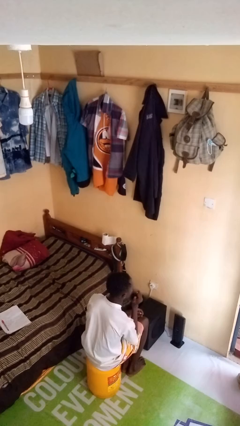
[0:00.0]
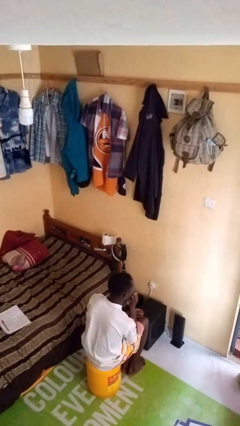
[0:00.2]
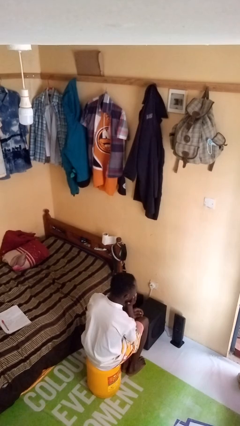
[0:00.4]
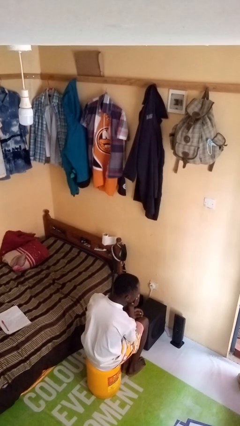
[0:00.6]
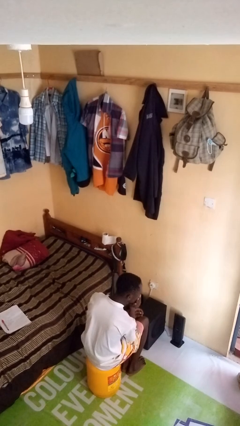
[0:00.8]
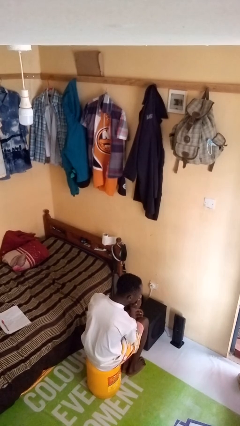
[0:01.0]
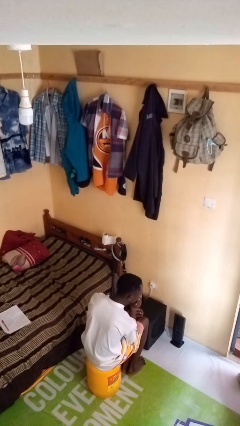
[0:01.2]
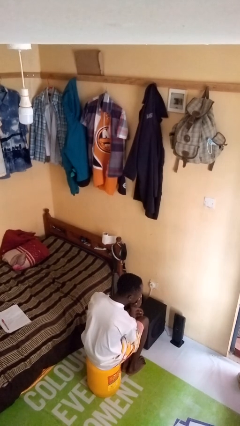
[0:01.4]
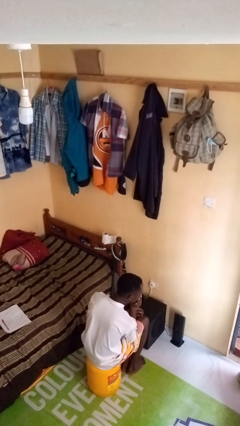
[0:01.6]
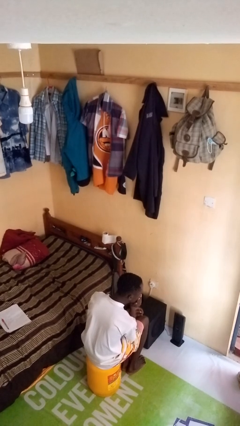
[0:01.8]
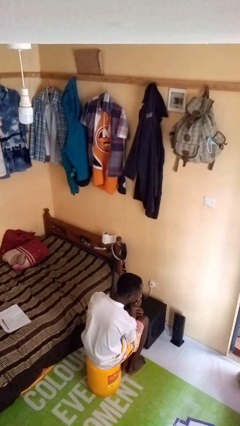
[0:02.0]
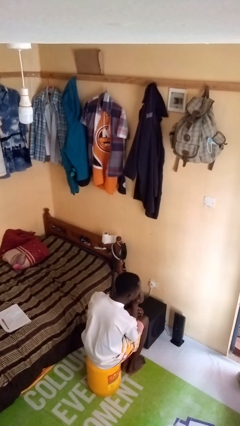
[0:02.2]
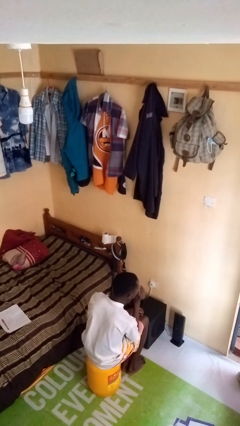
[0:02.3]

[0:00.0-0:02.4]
person strokes chin

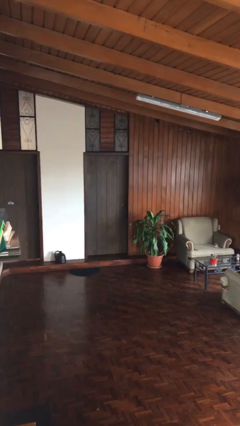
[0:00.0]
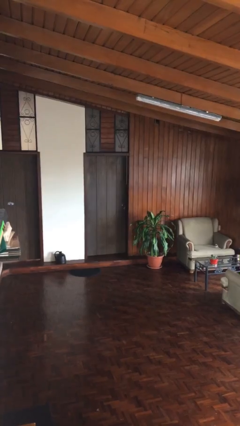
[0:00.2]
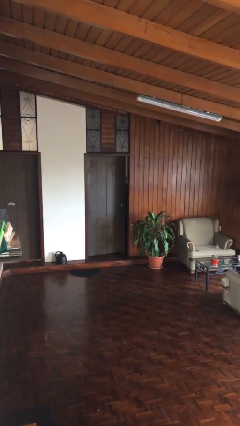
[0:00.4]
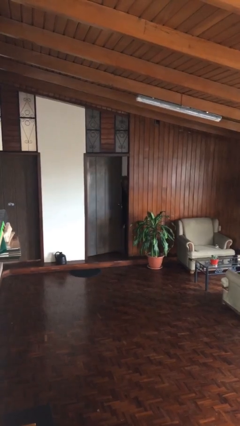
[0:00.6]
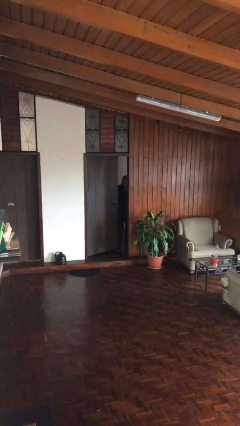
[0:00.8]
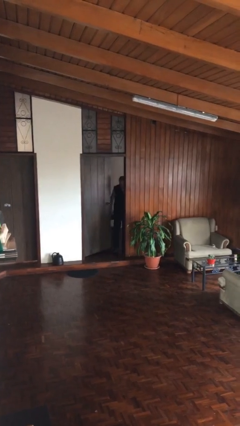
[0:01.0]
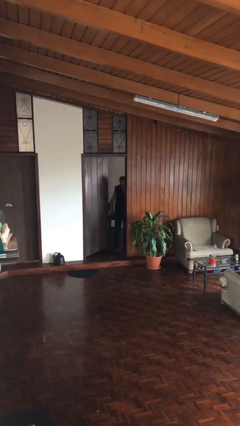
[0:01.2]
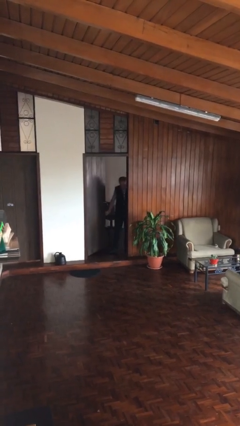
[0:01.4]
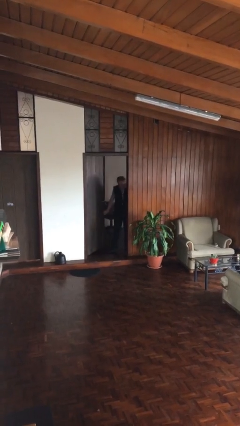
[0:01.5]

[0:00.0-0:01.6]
person opens facility door

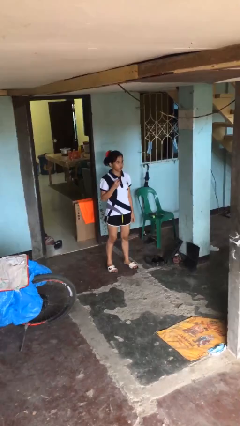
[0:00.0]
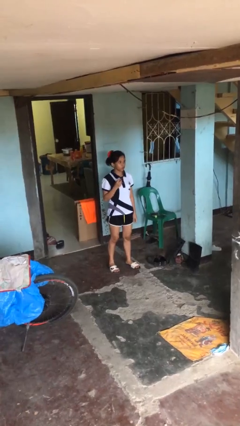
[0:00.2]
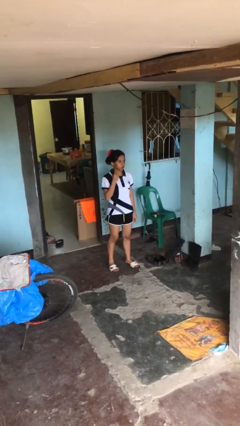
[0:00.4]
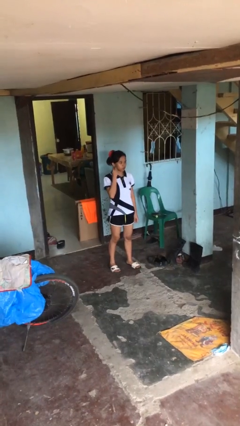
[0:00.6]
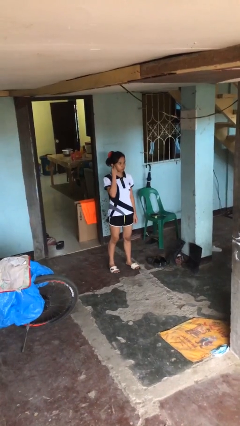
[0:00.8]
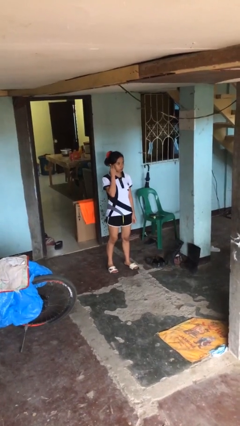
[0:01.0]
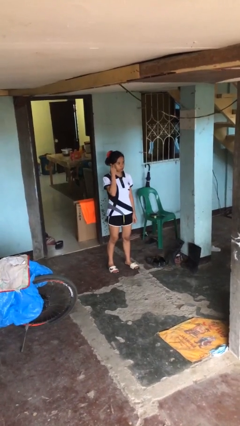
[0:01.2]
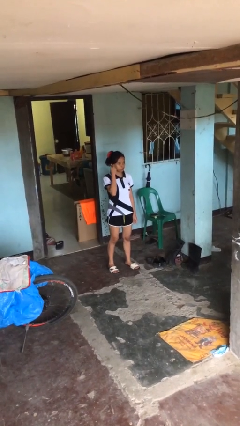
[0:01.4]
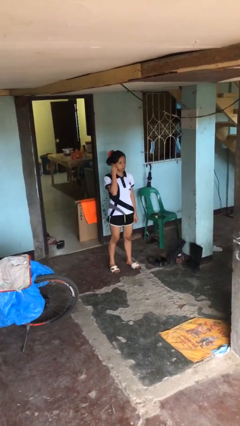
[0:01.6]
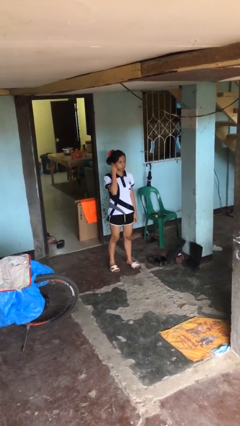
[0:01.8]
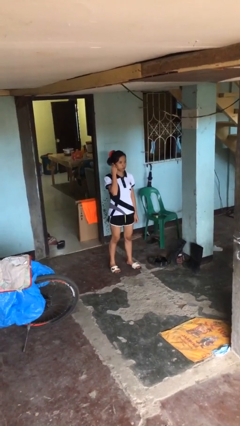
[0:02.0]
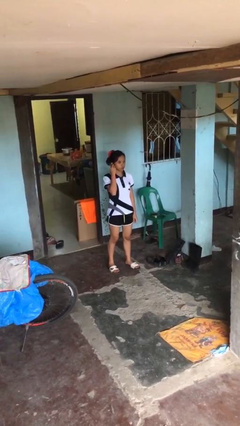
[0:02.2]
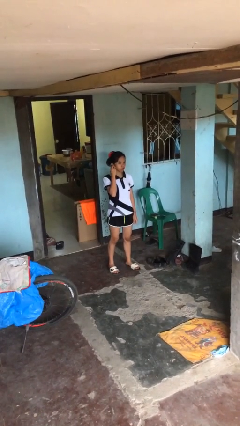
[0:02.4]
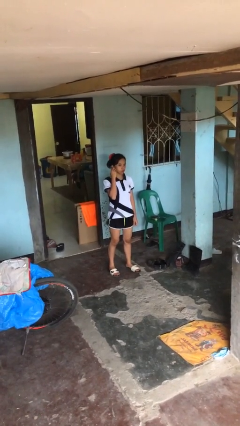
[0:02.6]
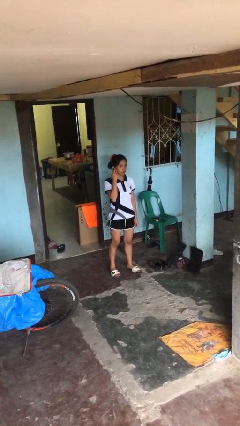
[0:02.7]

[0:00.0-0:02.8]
person puts on earrings

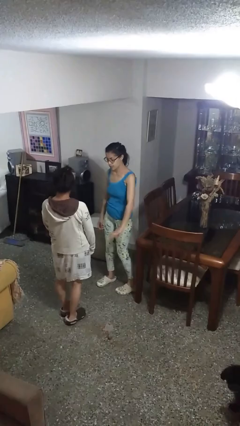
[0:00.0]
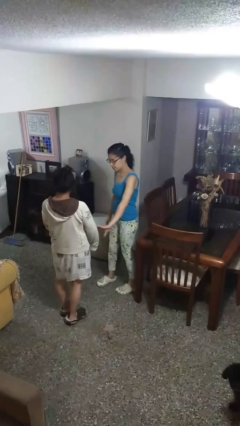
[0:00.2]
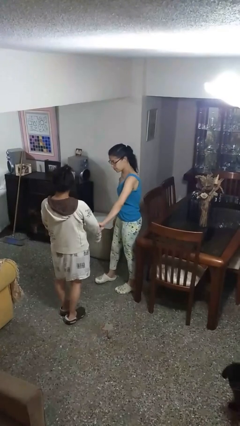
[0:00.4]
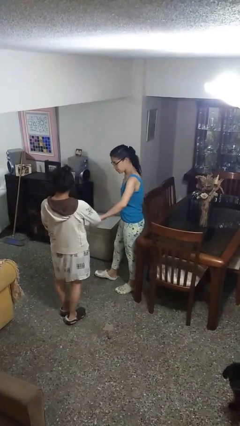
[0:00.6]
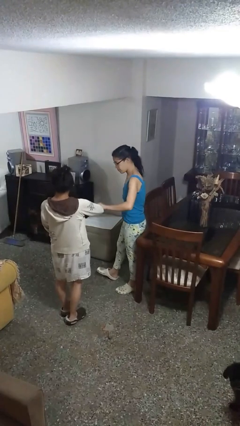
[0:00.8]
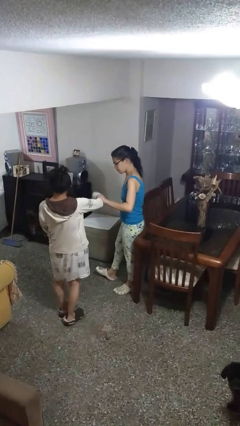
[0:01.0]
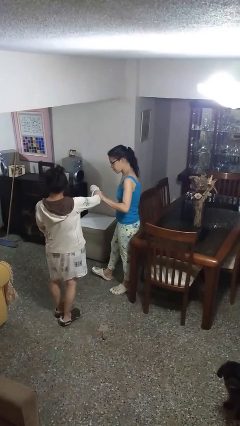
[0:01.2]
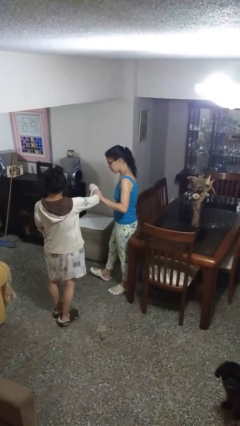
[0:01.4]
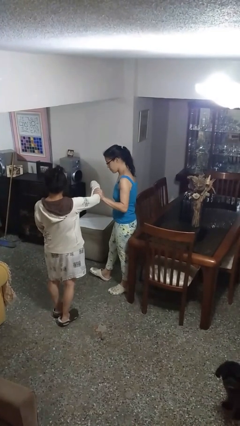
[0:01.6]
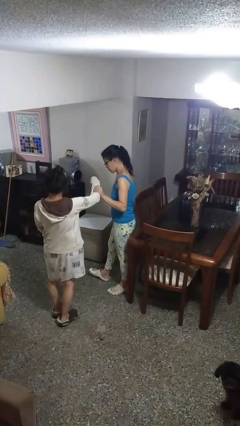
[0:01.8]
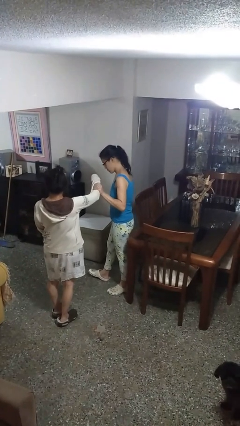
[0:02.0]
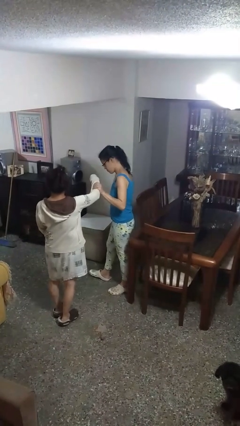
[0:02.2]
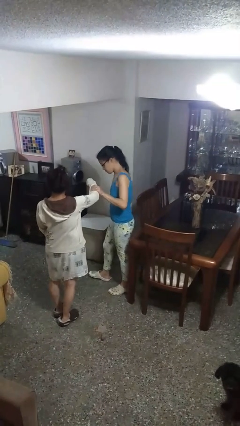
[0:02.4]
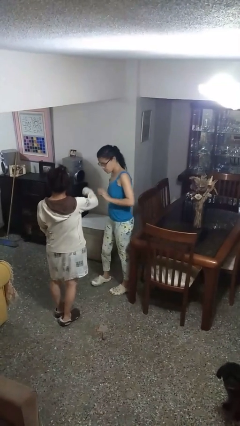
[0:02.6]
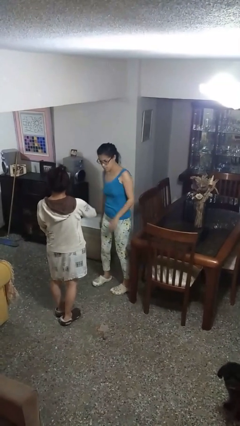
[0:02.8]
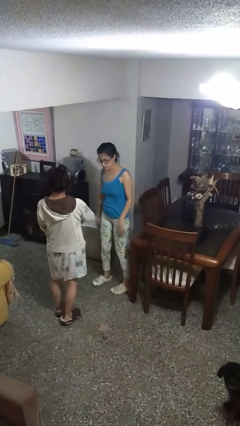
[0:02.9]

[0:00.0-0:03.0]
person grabs person by forearm

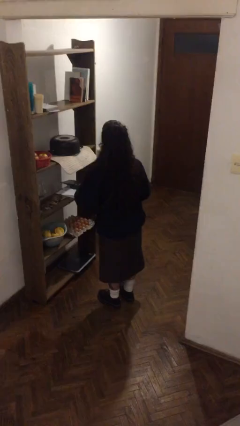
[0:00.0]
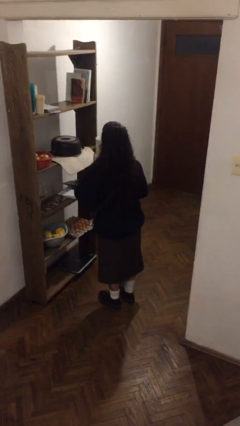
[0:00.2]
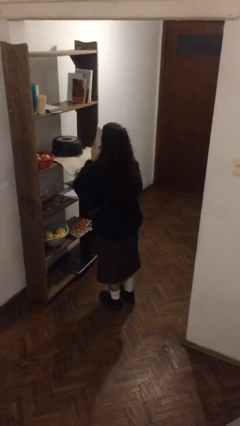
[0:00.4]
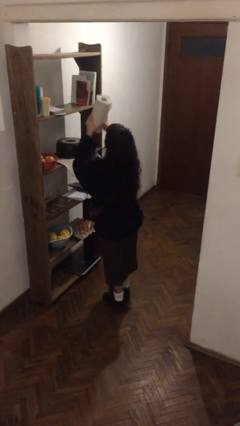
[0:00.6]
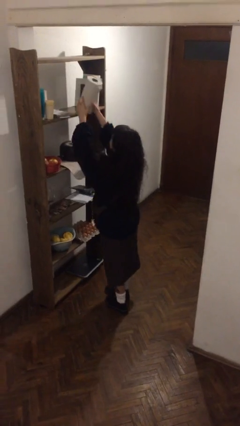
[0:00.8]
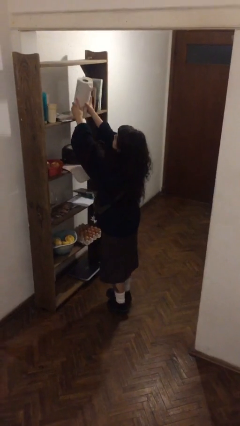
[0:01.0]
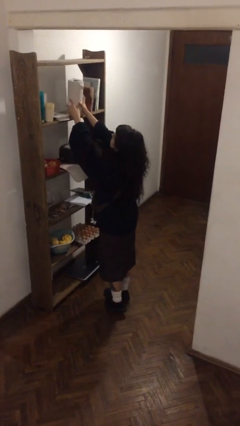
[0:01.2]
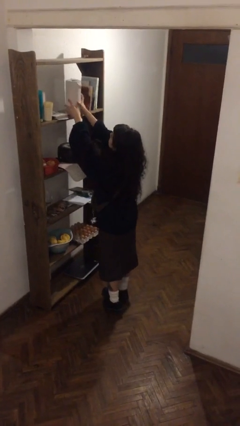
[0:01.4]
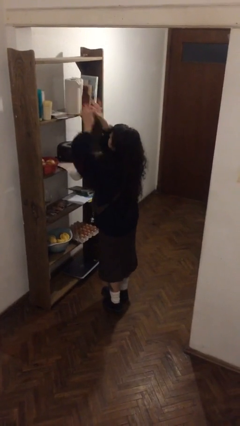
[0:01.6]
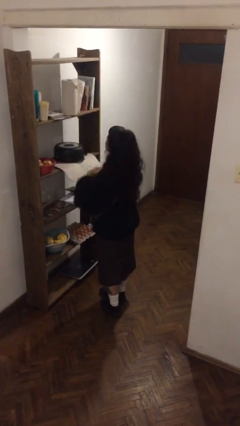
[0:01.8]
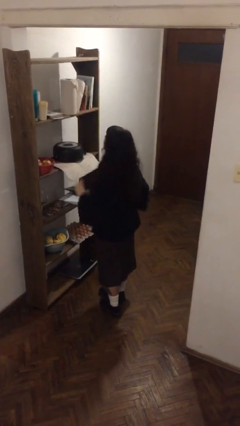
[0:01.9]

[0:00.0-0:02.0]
person puts down object on shelf

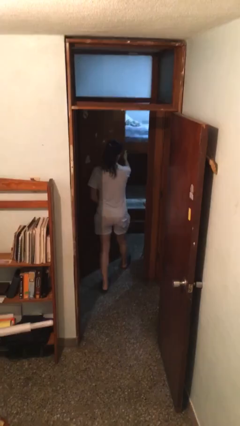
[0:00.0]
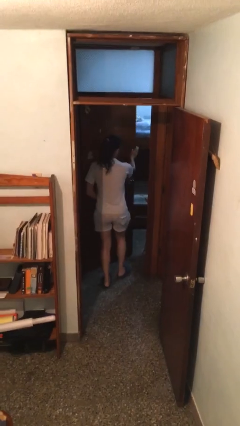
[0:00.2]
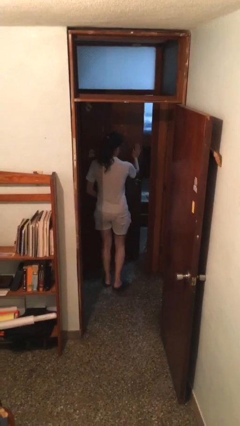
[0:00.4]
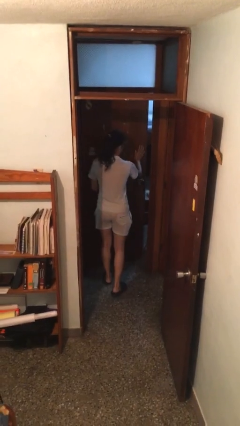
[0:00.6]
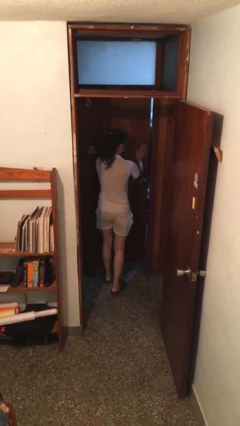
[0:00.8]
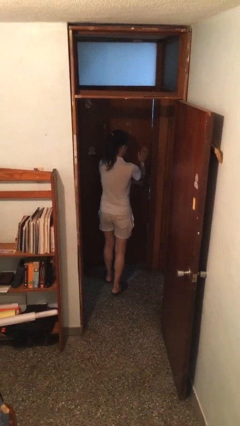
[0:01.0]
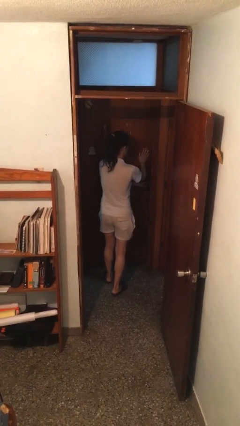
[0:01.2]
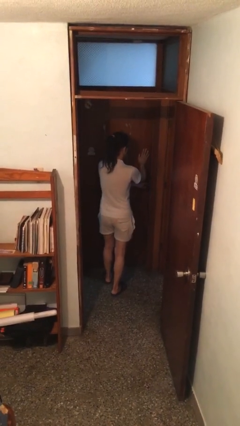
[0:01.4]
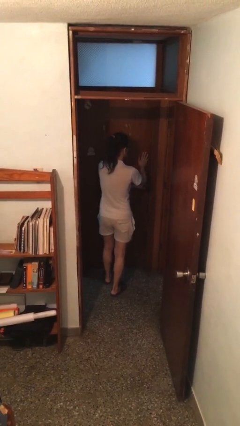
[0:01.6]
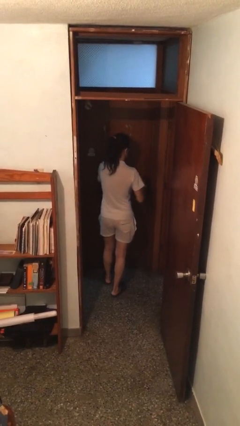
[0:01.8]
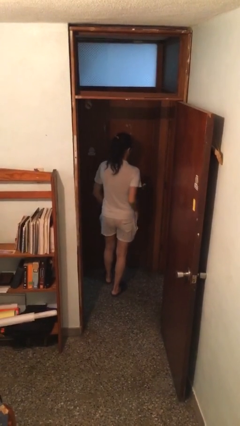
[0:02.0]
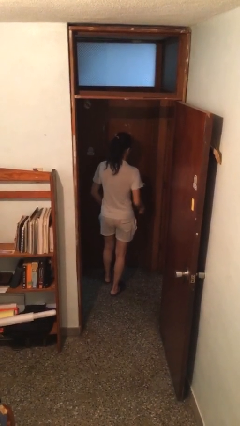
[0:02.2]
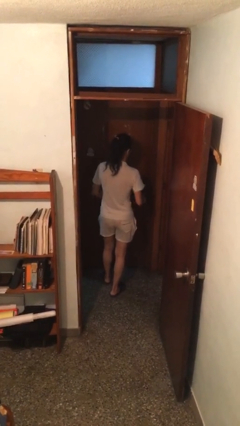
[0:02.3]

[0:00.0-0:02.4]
person closes facility door

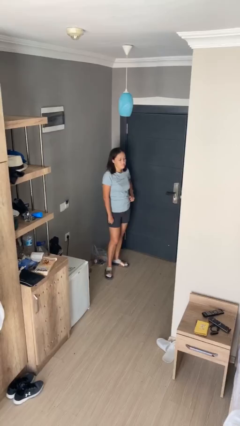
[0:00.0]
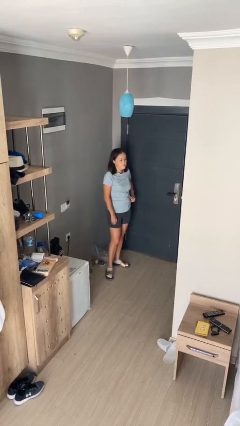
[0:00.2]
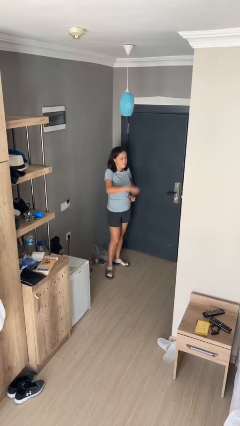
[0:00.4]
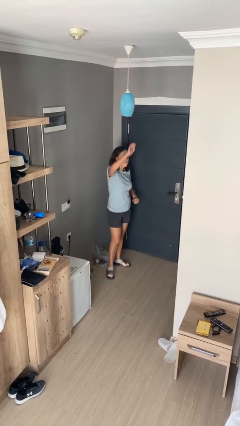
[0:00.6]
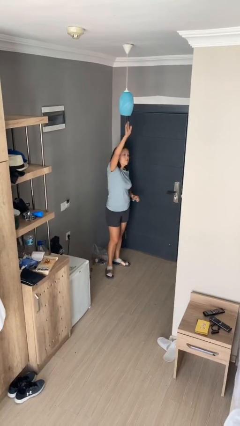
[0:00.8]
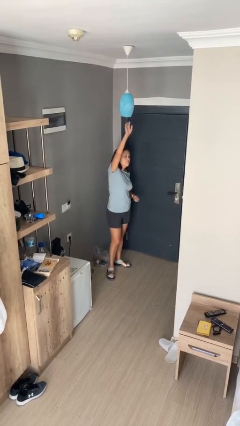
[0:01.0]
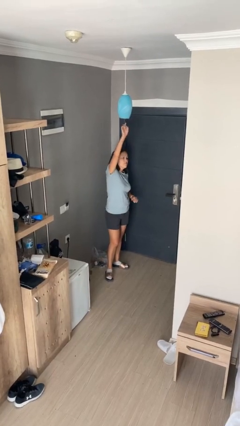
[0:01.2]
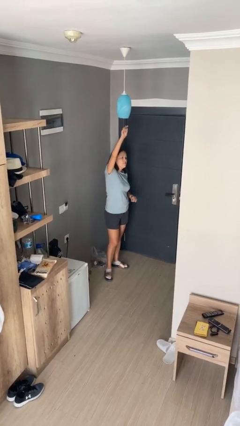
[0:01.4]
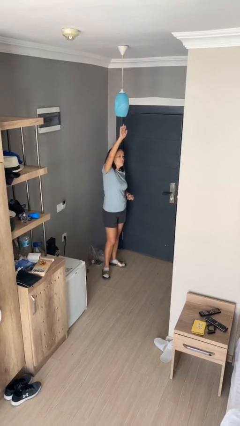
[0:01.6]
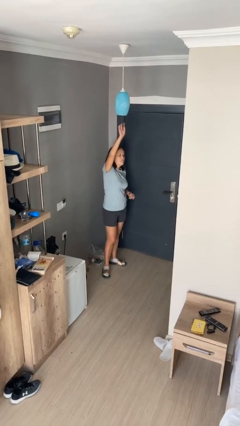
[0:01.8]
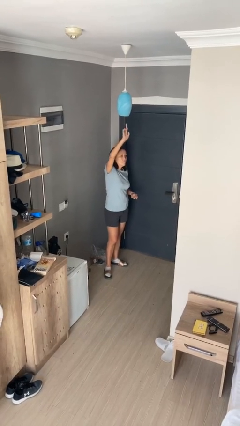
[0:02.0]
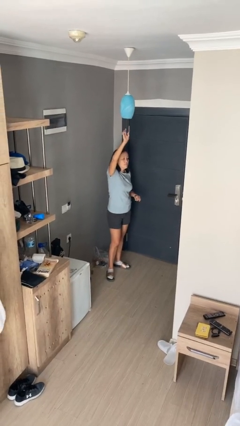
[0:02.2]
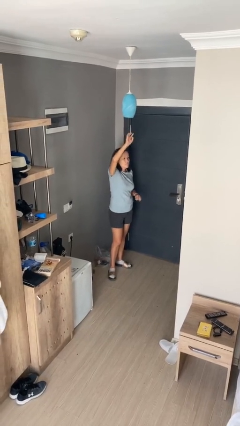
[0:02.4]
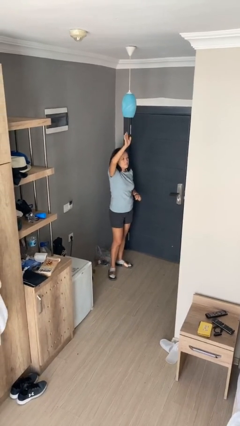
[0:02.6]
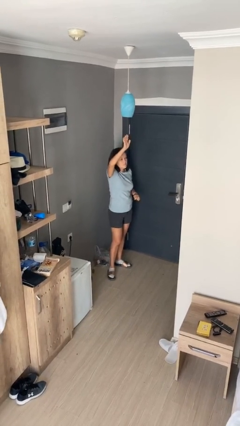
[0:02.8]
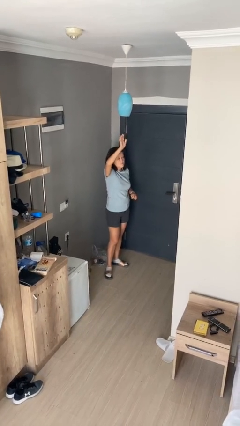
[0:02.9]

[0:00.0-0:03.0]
person gestures raise hand

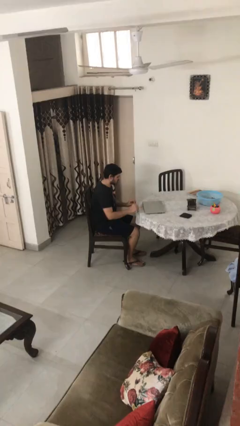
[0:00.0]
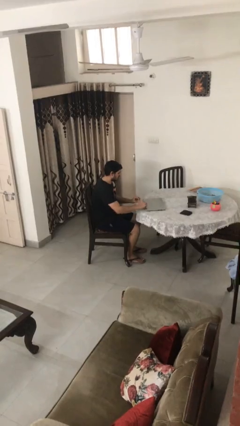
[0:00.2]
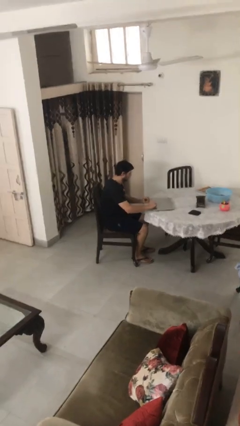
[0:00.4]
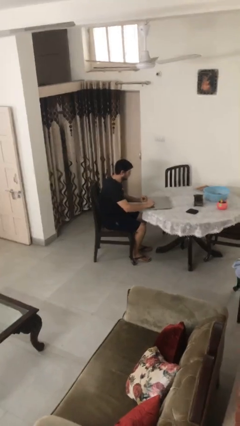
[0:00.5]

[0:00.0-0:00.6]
person interacts with laptop
